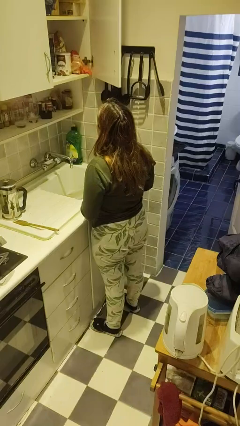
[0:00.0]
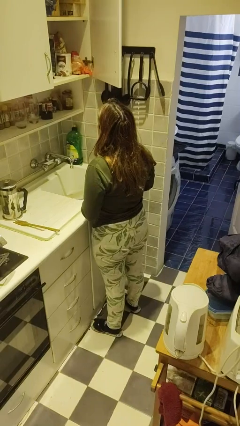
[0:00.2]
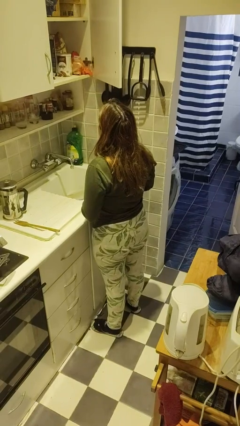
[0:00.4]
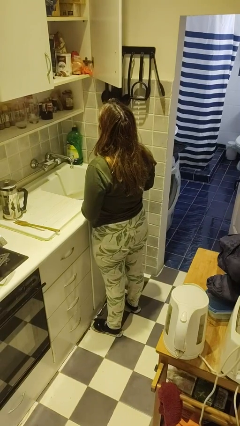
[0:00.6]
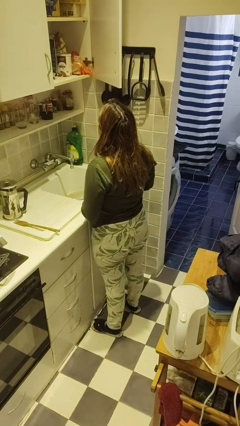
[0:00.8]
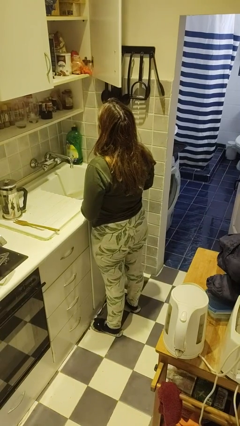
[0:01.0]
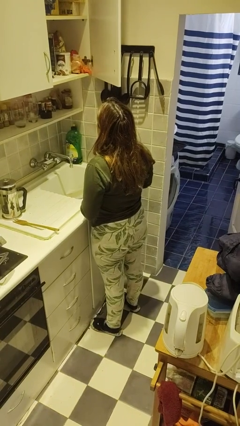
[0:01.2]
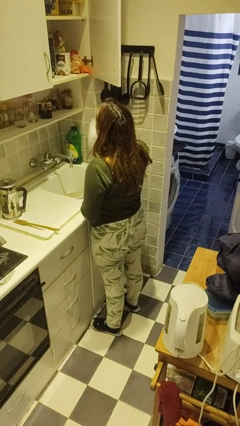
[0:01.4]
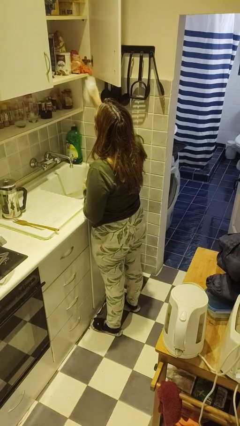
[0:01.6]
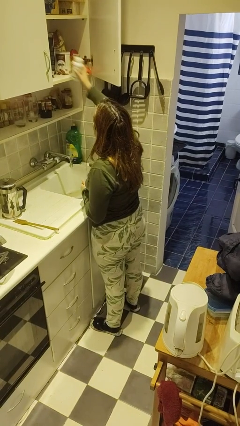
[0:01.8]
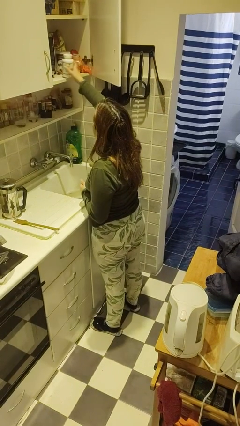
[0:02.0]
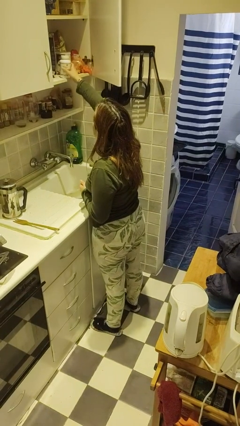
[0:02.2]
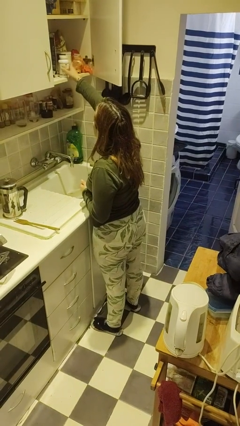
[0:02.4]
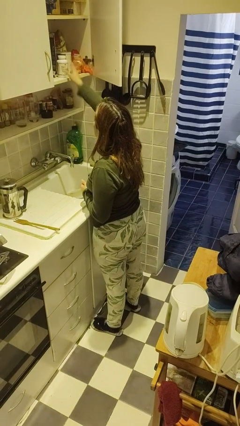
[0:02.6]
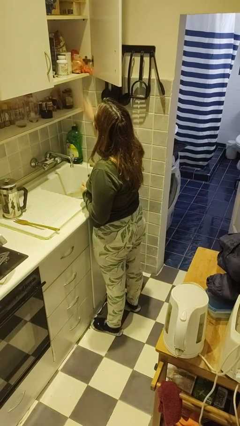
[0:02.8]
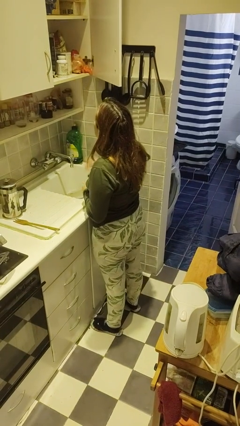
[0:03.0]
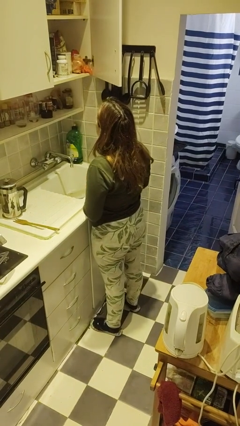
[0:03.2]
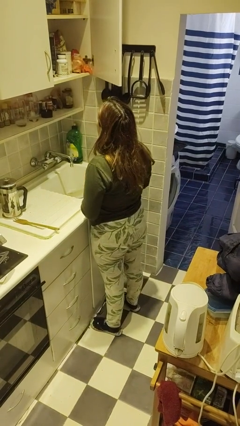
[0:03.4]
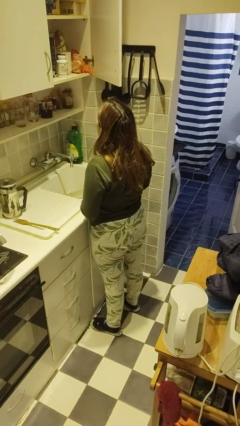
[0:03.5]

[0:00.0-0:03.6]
person puts object in cabinet

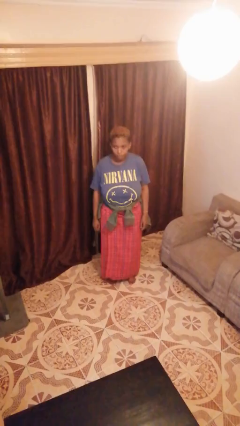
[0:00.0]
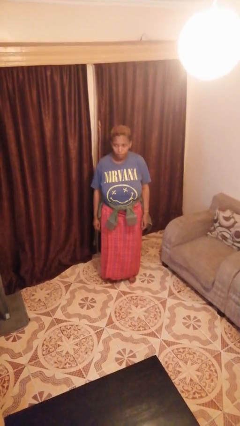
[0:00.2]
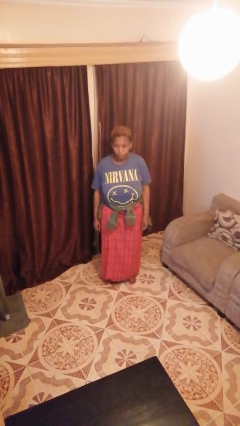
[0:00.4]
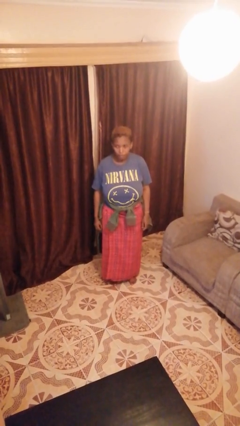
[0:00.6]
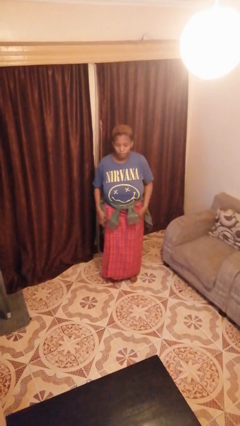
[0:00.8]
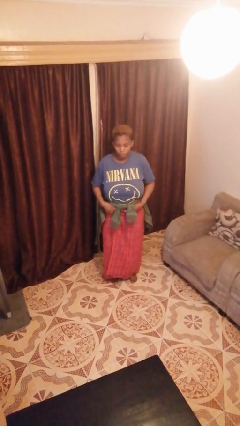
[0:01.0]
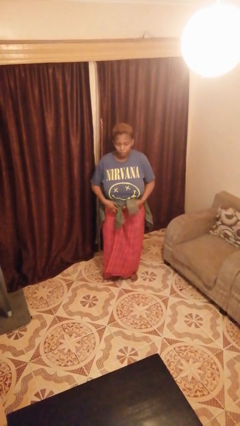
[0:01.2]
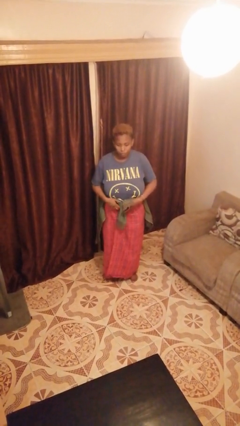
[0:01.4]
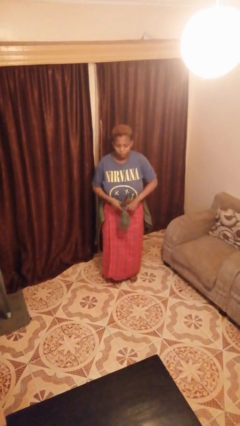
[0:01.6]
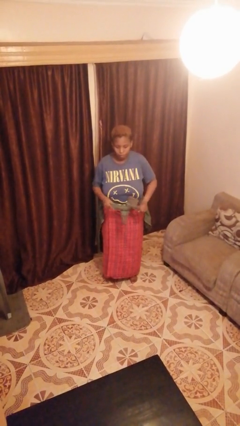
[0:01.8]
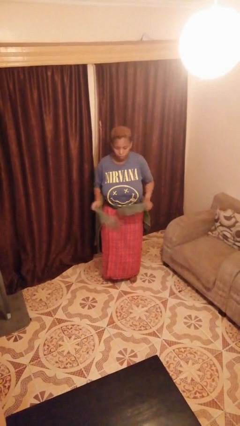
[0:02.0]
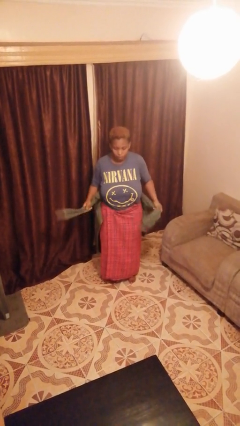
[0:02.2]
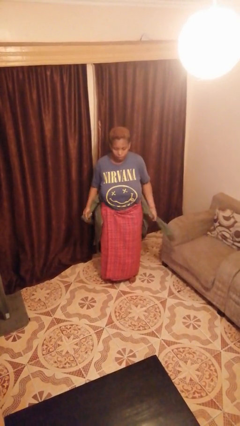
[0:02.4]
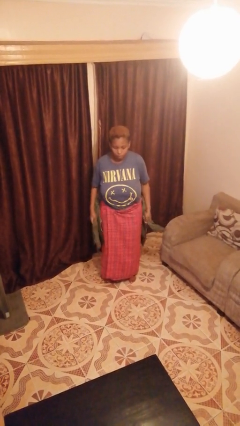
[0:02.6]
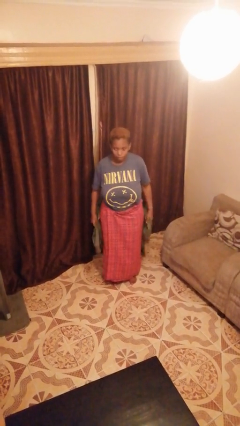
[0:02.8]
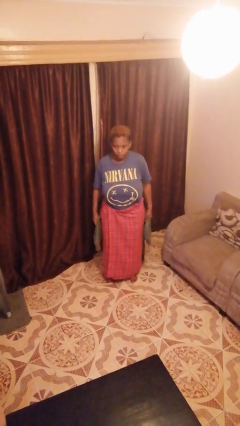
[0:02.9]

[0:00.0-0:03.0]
person unties jacket around waist

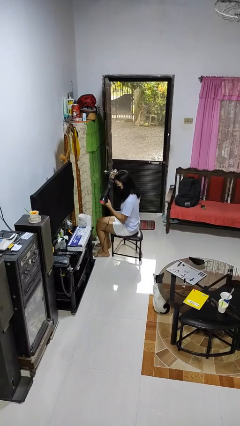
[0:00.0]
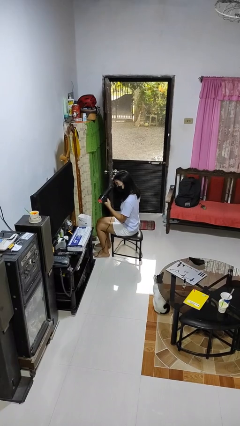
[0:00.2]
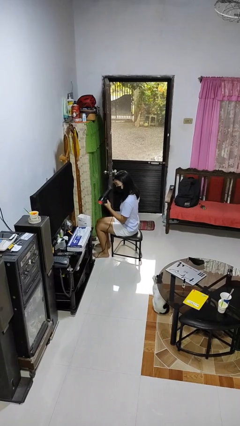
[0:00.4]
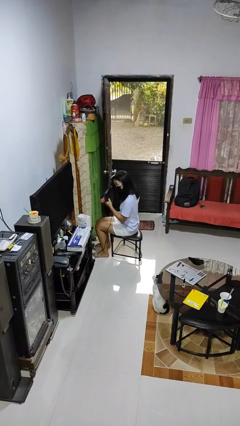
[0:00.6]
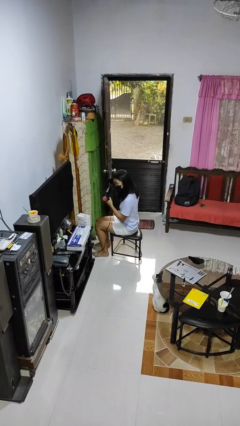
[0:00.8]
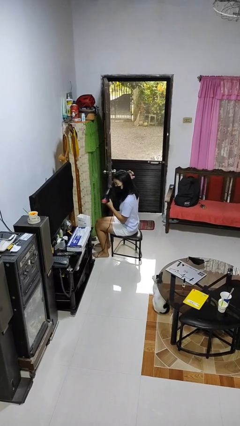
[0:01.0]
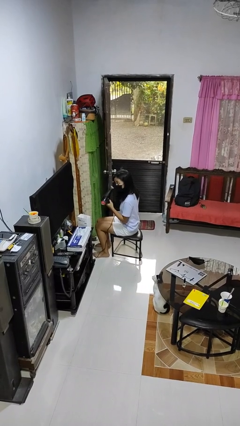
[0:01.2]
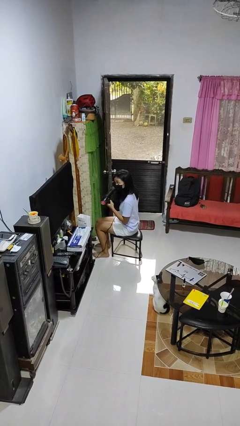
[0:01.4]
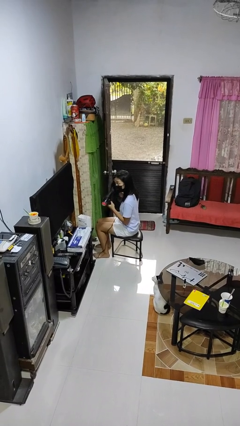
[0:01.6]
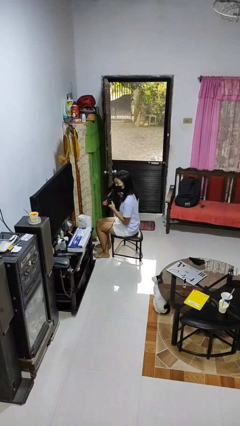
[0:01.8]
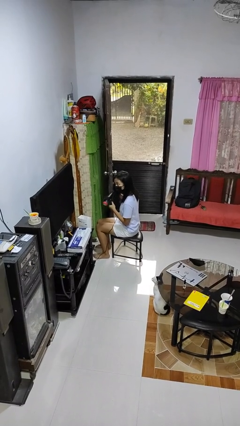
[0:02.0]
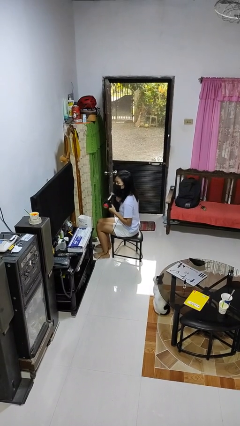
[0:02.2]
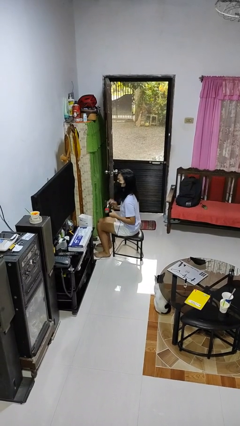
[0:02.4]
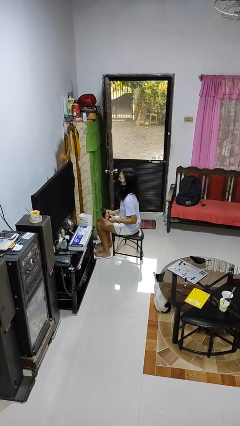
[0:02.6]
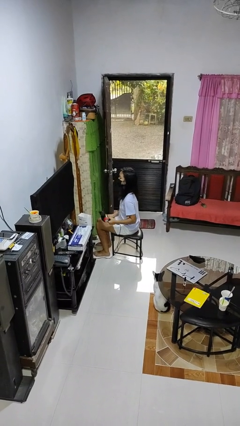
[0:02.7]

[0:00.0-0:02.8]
person dries hair with hairdryer

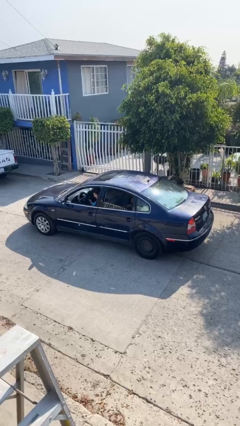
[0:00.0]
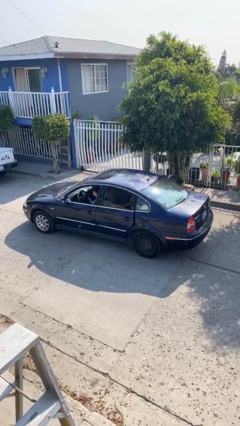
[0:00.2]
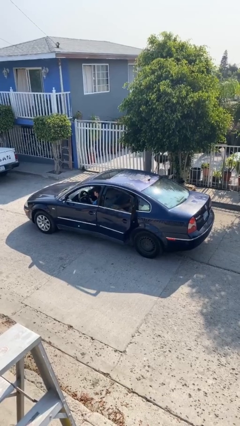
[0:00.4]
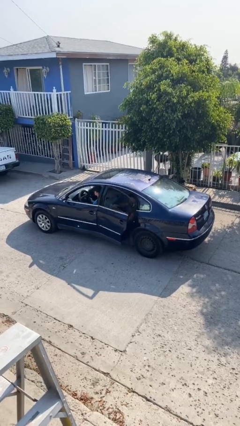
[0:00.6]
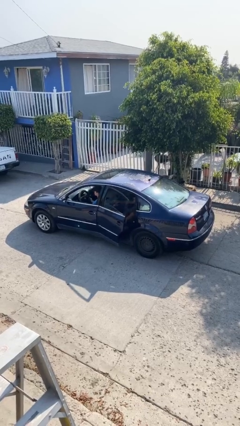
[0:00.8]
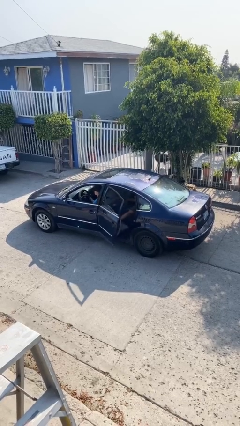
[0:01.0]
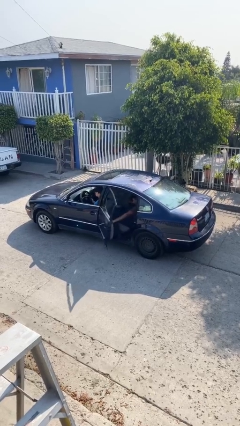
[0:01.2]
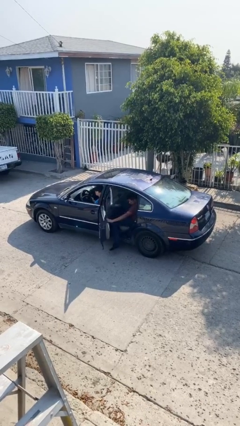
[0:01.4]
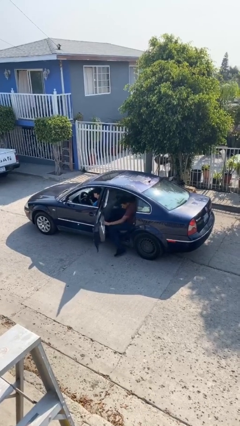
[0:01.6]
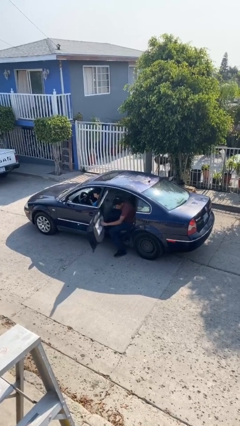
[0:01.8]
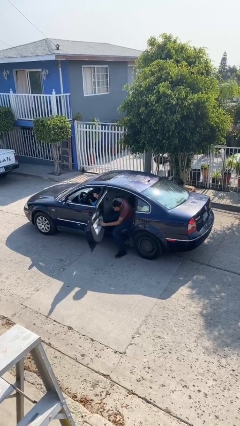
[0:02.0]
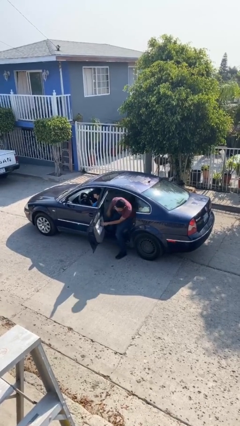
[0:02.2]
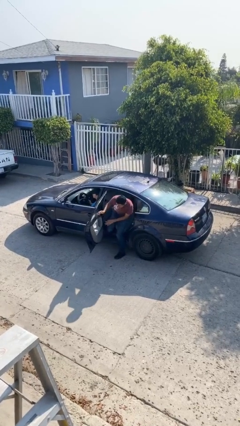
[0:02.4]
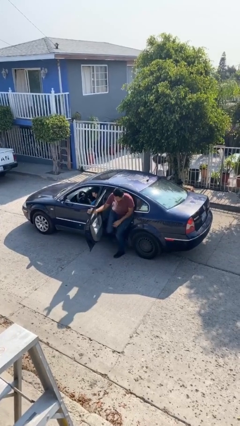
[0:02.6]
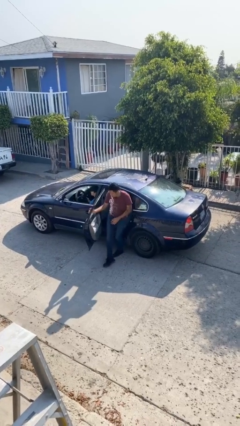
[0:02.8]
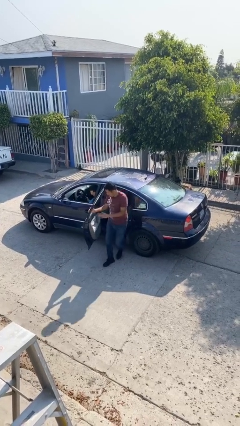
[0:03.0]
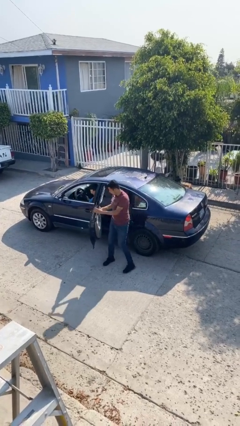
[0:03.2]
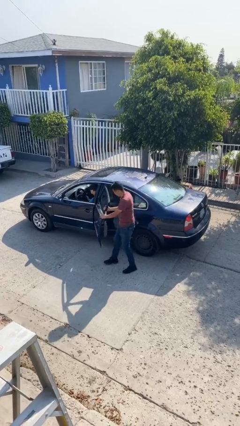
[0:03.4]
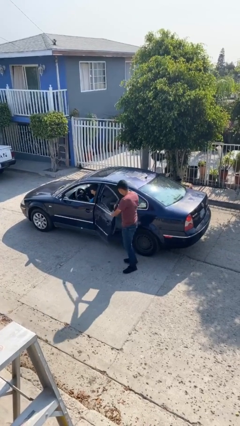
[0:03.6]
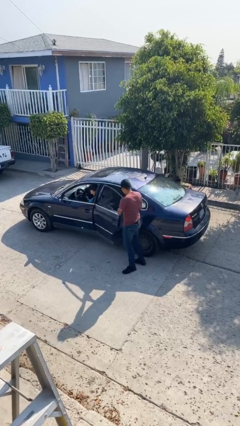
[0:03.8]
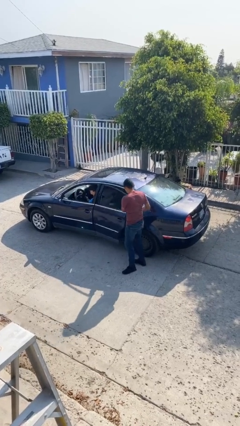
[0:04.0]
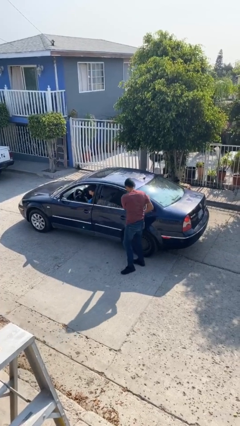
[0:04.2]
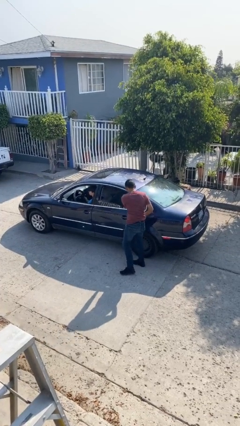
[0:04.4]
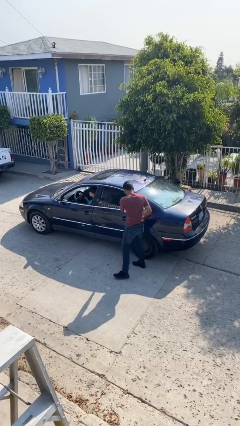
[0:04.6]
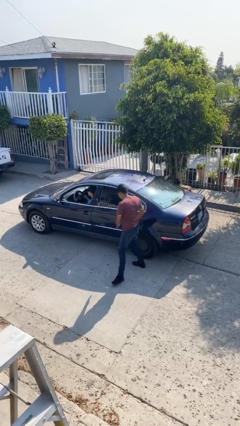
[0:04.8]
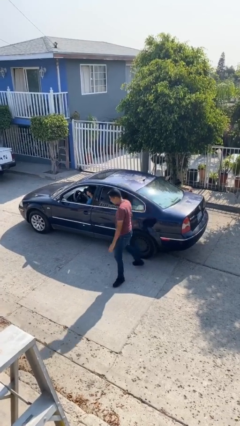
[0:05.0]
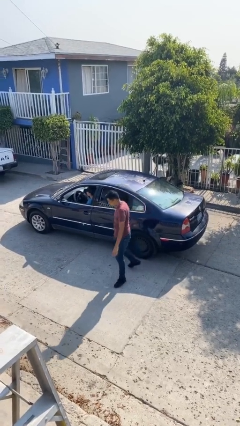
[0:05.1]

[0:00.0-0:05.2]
car drops off person

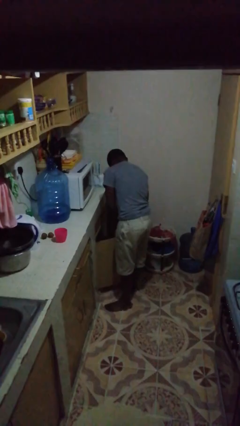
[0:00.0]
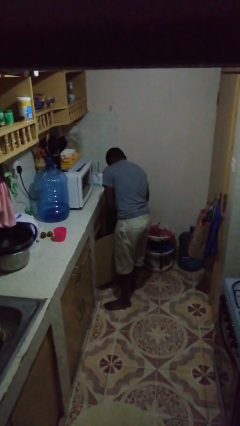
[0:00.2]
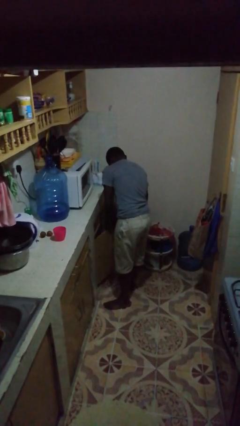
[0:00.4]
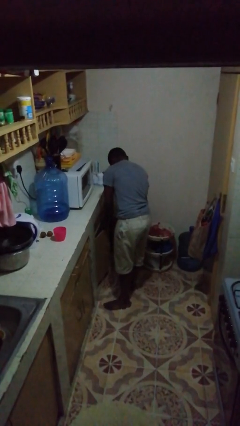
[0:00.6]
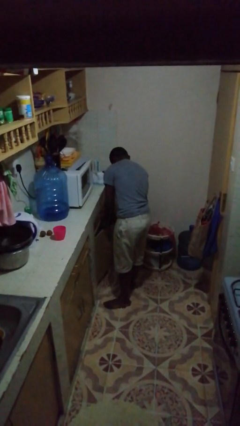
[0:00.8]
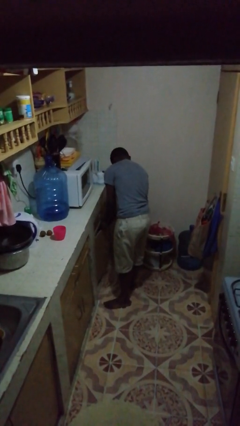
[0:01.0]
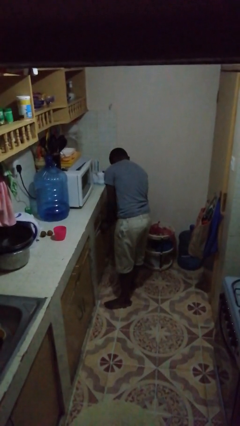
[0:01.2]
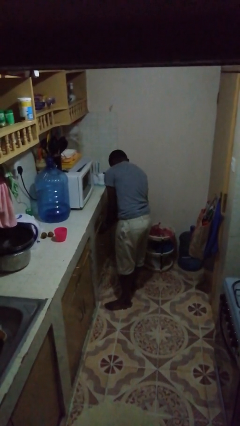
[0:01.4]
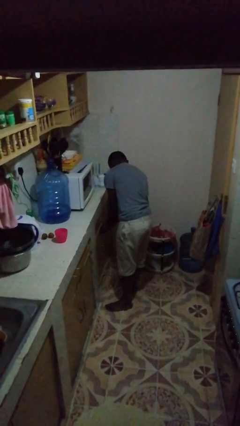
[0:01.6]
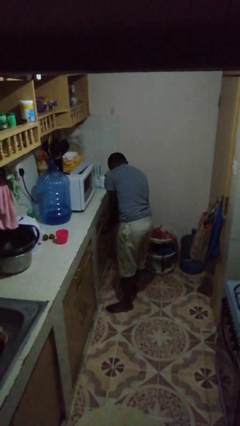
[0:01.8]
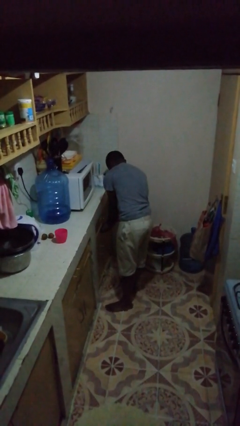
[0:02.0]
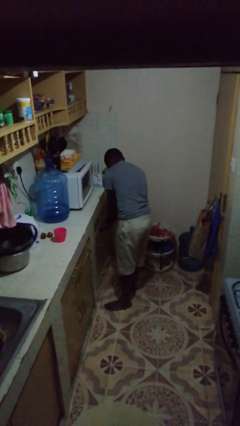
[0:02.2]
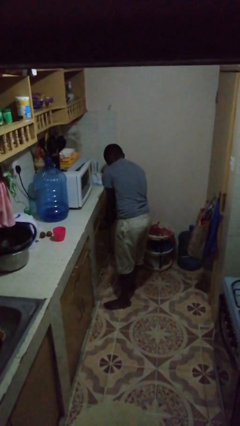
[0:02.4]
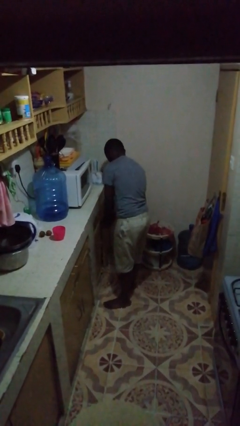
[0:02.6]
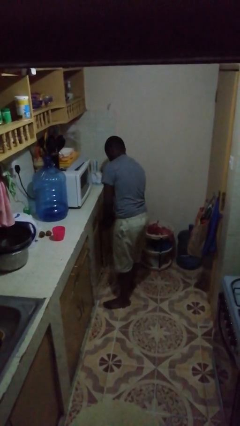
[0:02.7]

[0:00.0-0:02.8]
person closes cabinet
